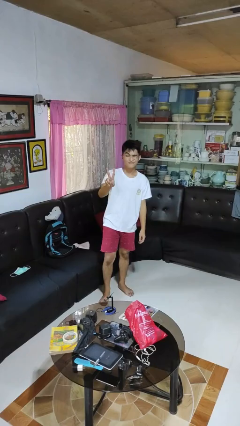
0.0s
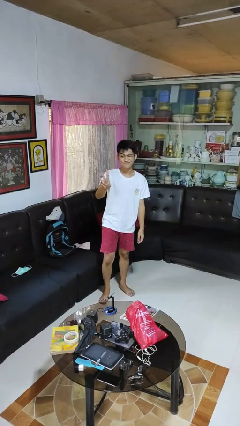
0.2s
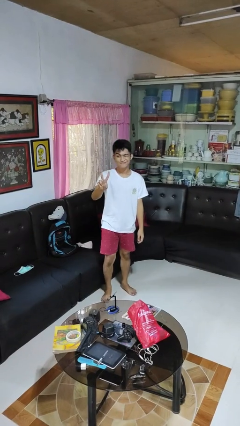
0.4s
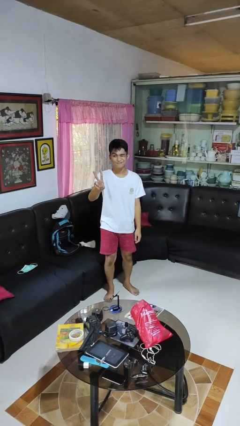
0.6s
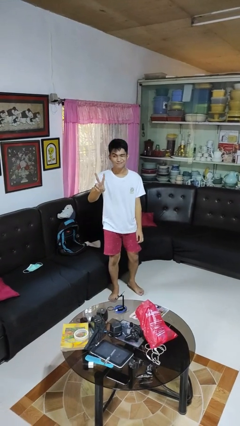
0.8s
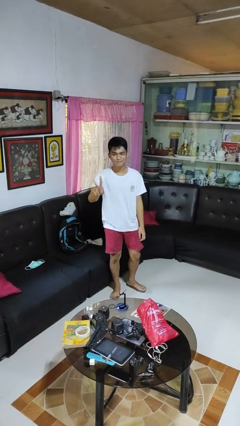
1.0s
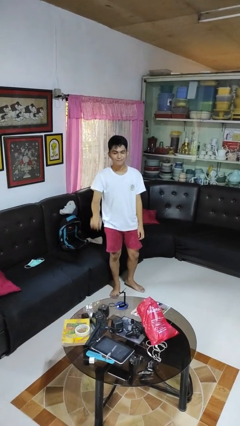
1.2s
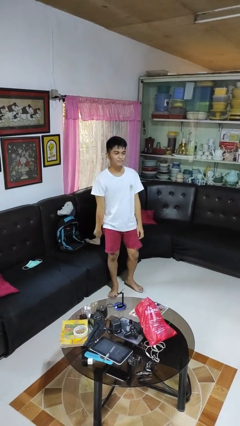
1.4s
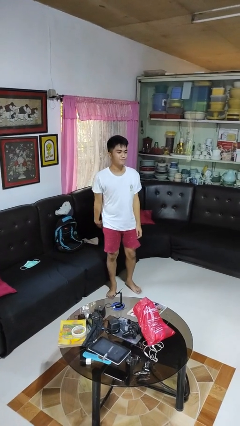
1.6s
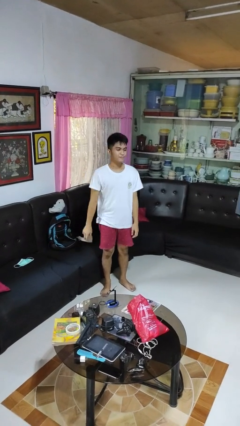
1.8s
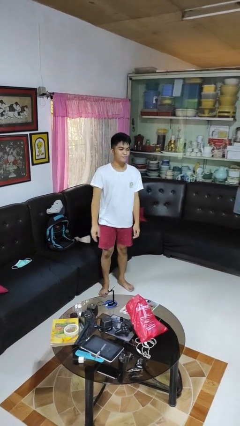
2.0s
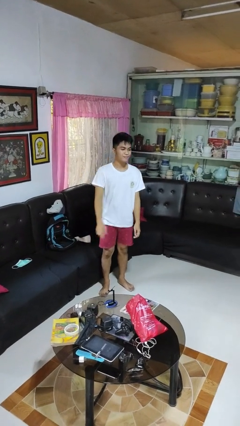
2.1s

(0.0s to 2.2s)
person gestures peace

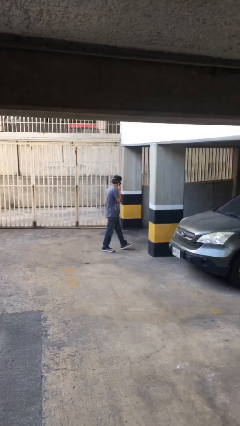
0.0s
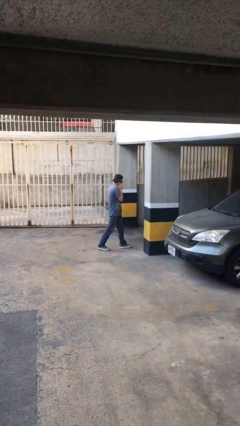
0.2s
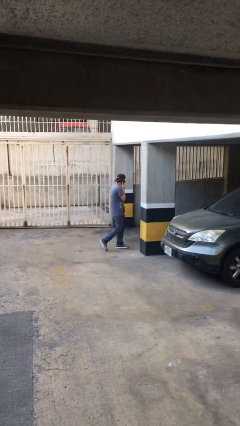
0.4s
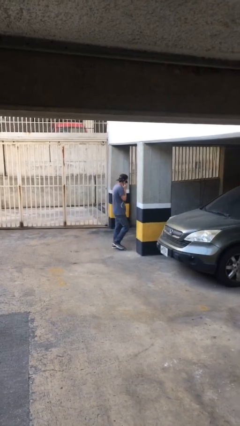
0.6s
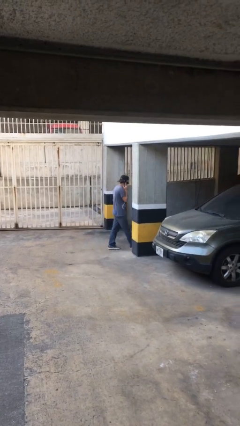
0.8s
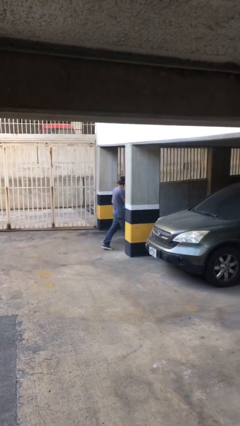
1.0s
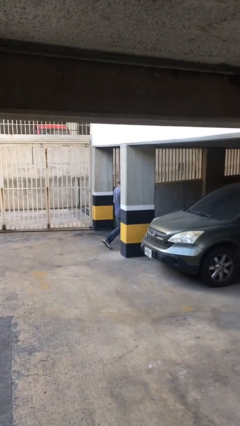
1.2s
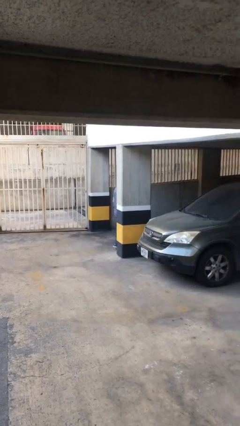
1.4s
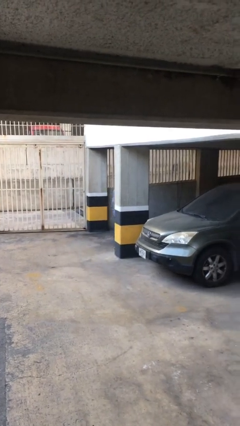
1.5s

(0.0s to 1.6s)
person exits scene through structure

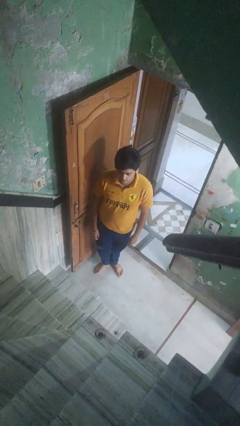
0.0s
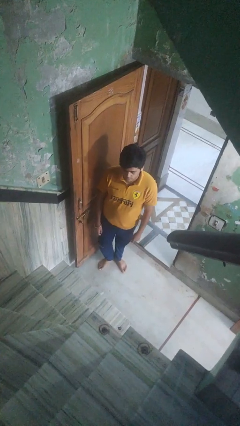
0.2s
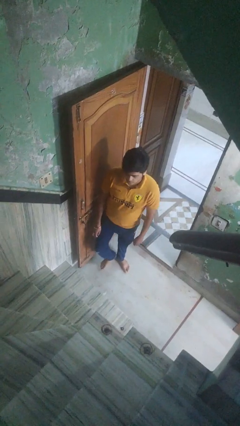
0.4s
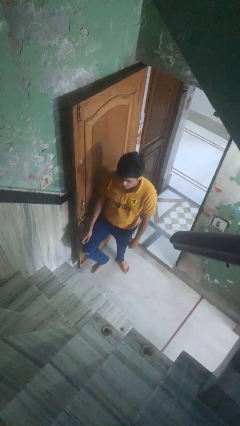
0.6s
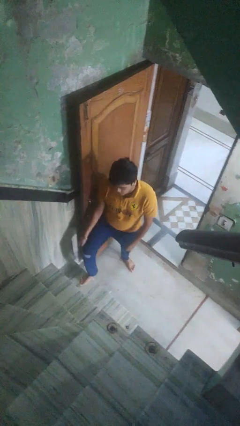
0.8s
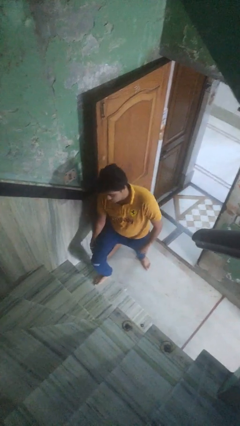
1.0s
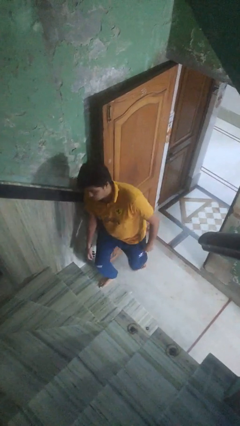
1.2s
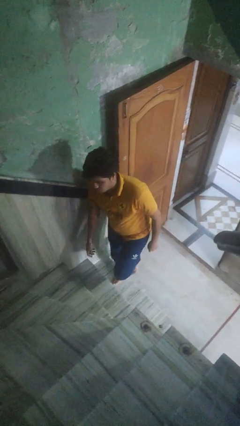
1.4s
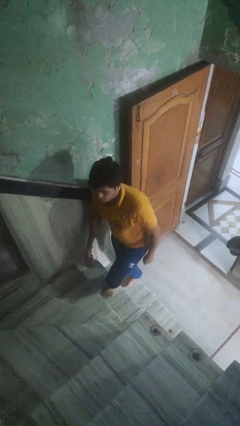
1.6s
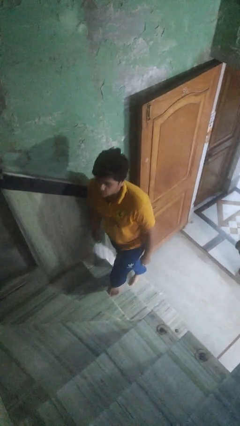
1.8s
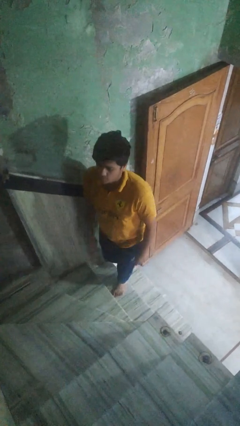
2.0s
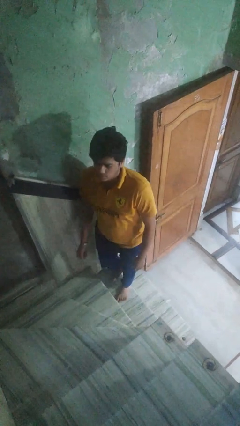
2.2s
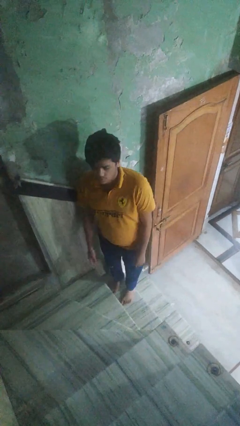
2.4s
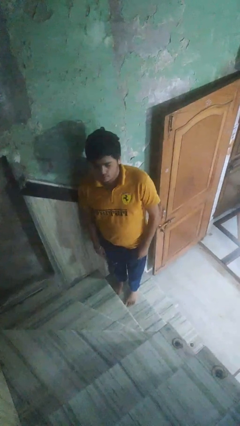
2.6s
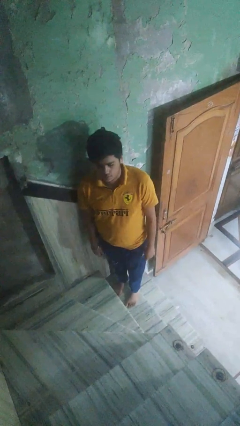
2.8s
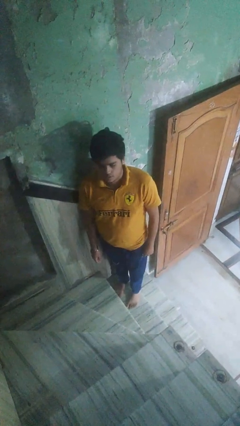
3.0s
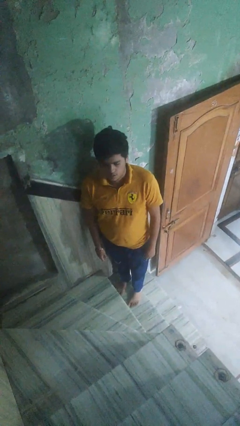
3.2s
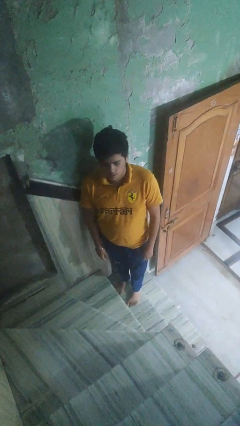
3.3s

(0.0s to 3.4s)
person climbs up stairs

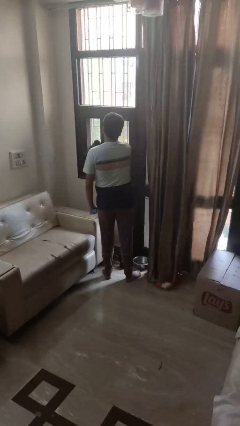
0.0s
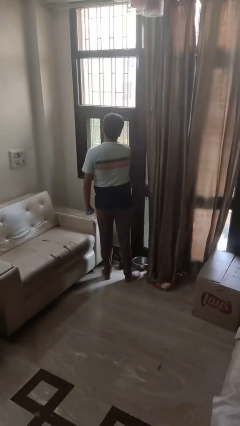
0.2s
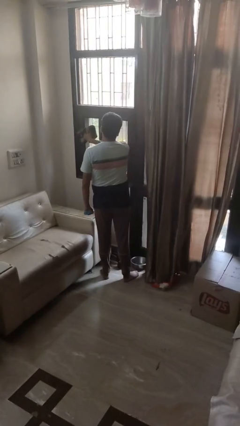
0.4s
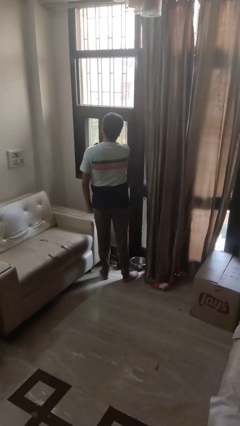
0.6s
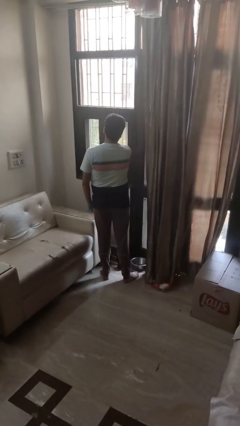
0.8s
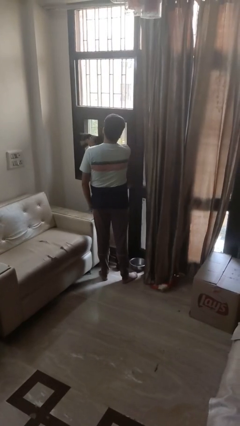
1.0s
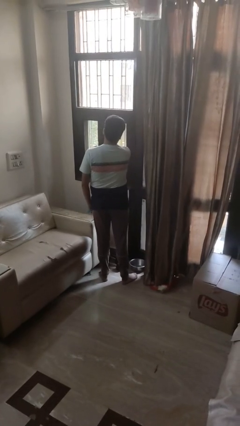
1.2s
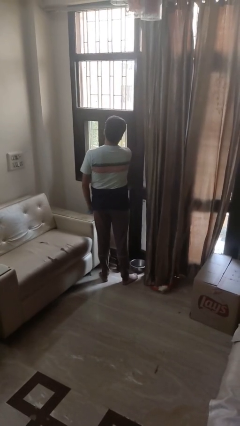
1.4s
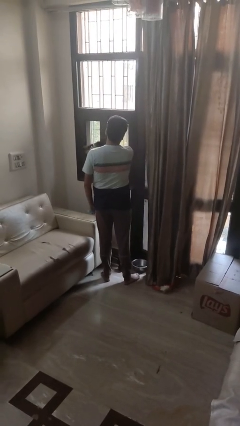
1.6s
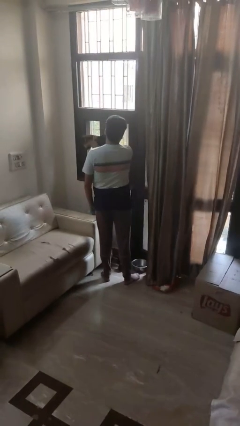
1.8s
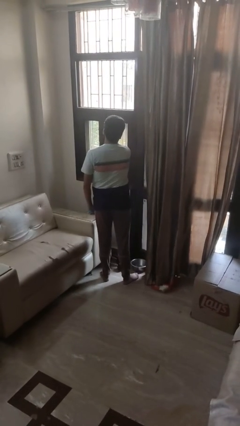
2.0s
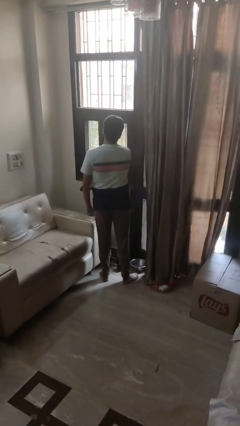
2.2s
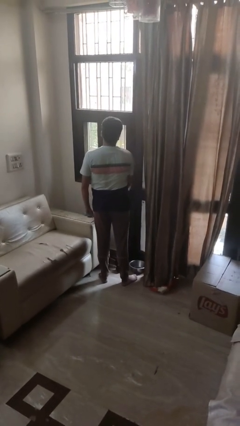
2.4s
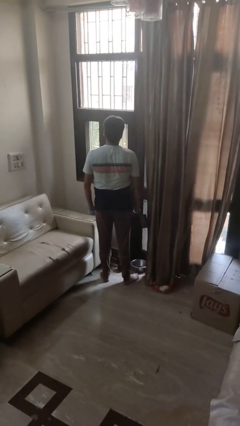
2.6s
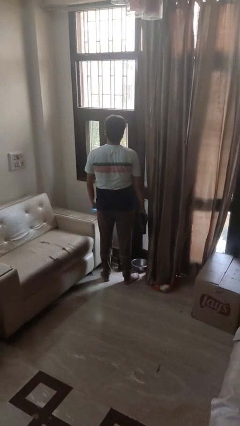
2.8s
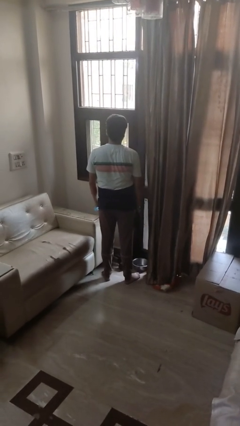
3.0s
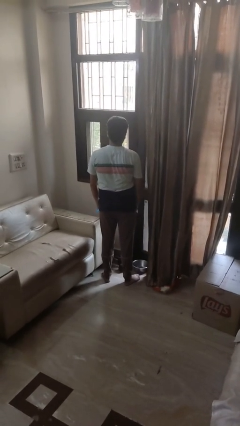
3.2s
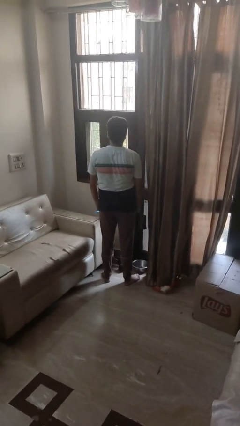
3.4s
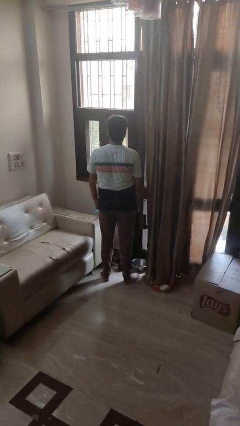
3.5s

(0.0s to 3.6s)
person washes window

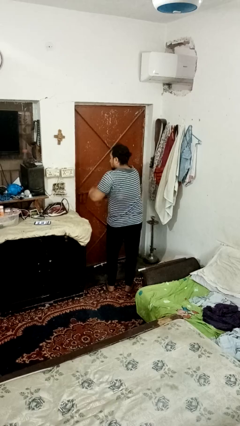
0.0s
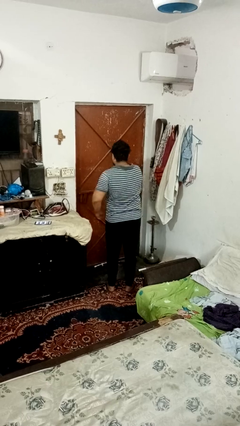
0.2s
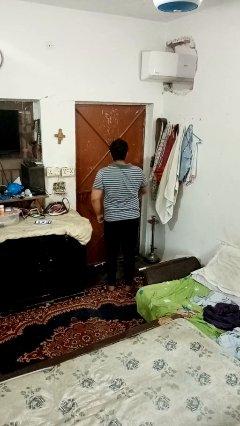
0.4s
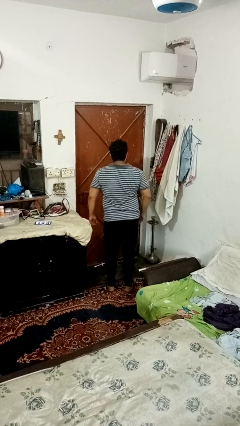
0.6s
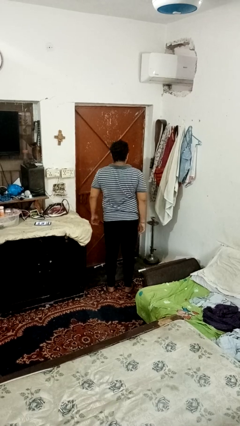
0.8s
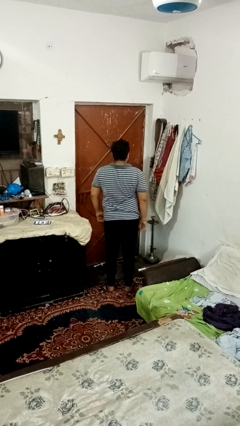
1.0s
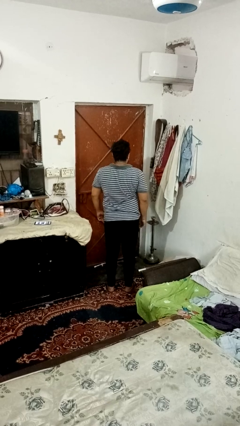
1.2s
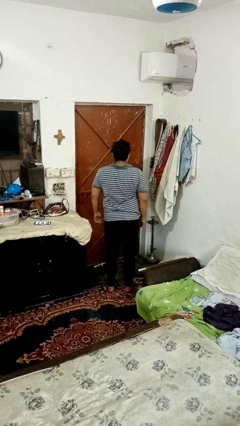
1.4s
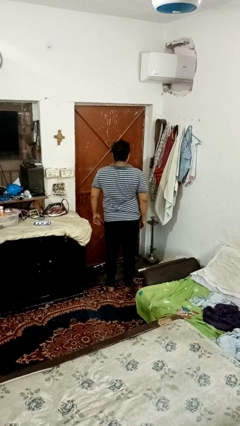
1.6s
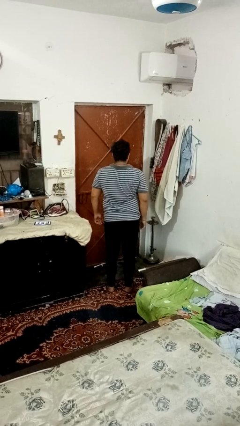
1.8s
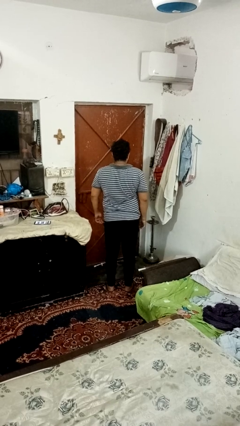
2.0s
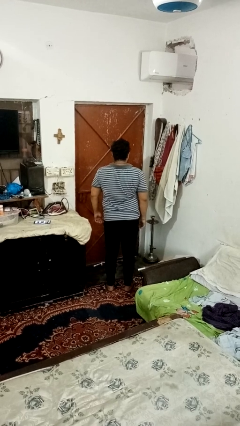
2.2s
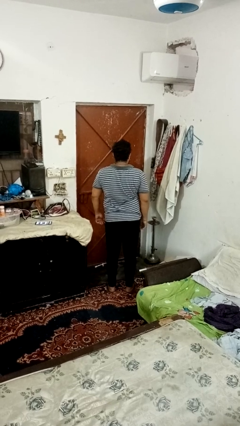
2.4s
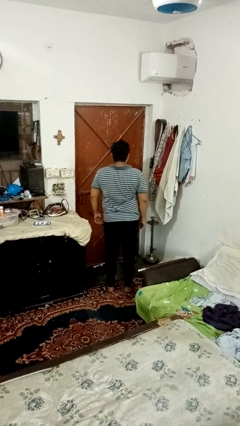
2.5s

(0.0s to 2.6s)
person dances in place

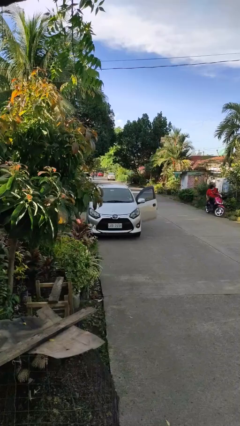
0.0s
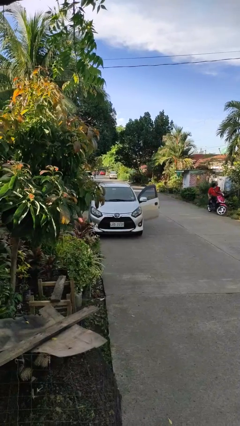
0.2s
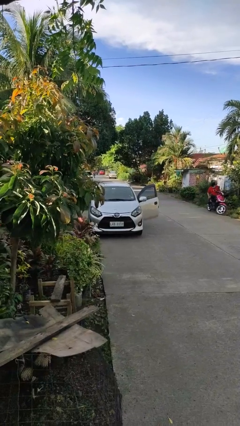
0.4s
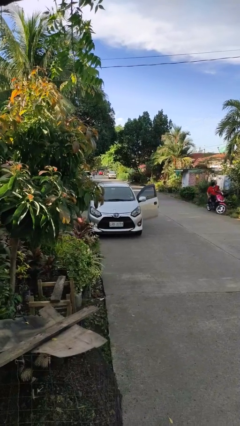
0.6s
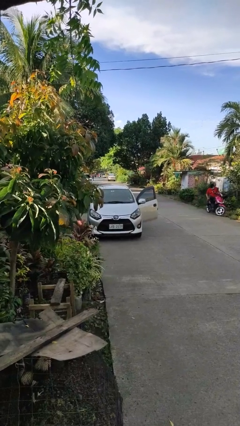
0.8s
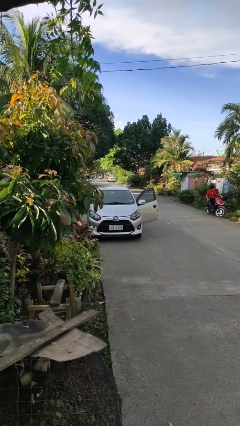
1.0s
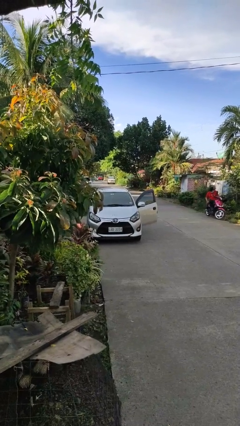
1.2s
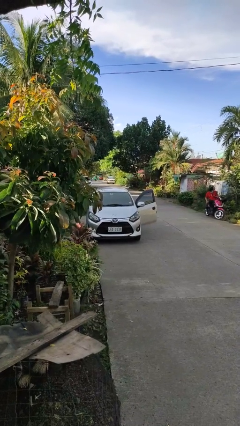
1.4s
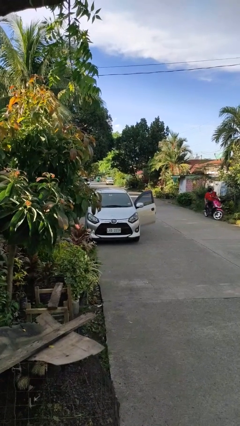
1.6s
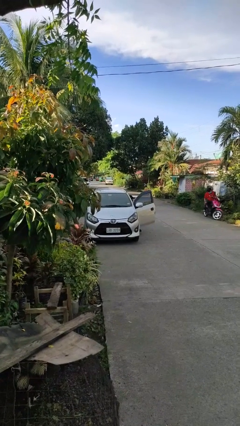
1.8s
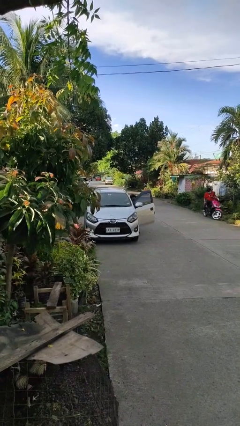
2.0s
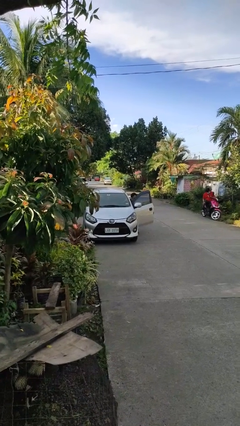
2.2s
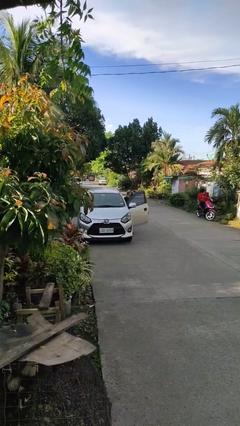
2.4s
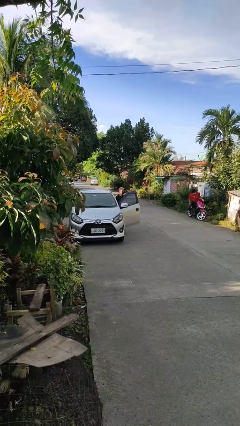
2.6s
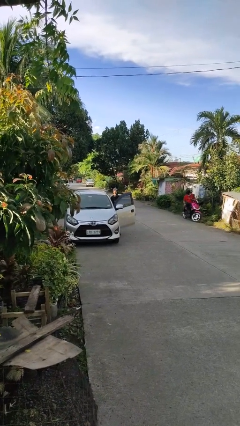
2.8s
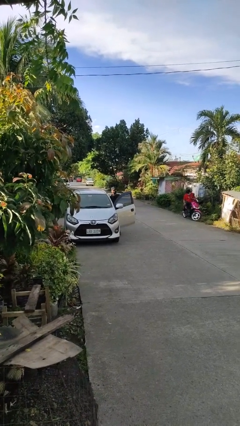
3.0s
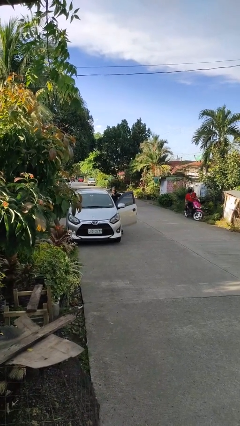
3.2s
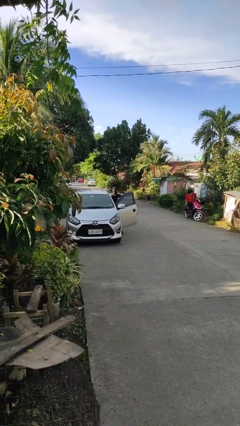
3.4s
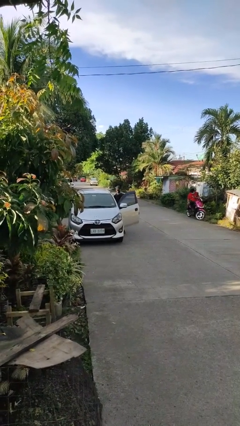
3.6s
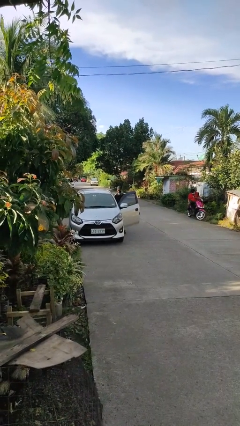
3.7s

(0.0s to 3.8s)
person exits car

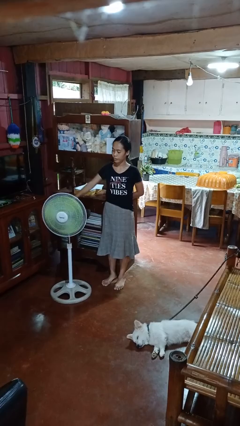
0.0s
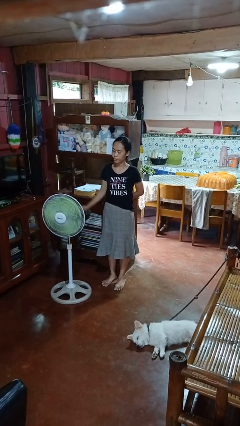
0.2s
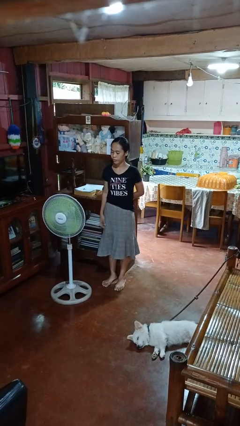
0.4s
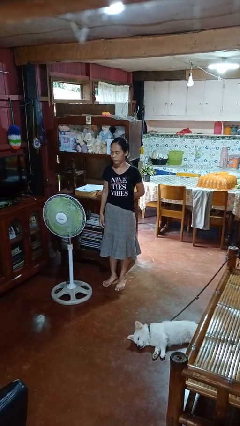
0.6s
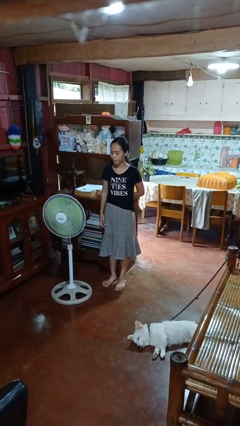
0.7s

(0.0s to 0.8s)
person turns off fan
